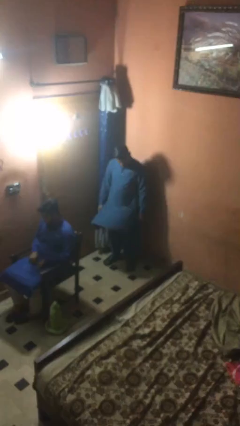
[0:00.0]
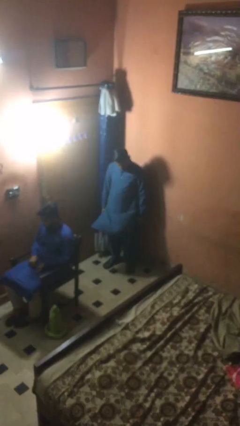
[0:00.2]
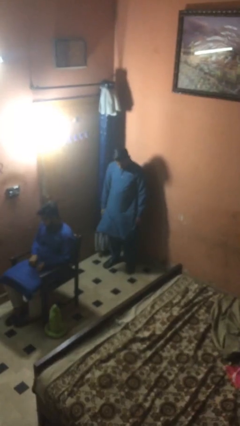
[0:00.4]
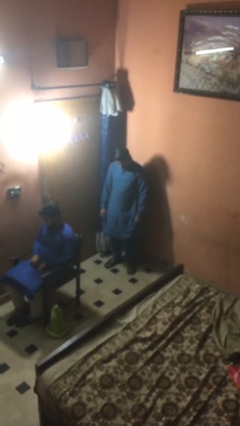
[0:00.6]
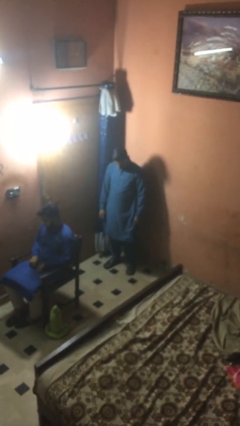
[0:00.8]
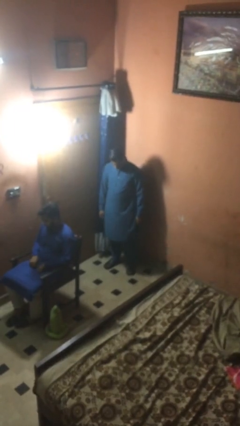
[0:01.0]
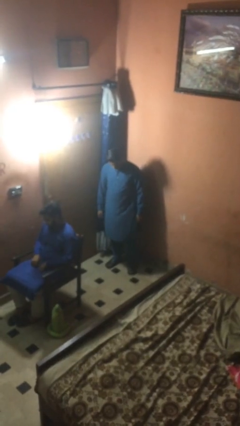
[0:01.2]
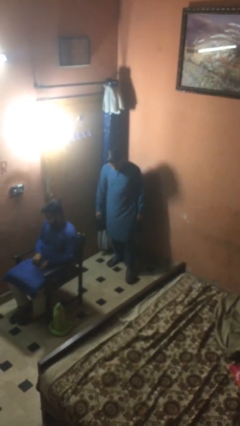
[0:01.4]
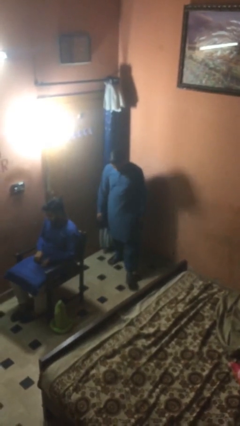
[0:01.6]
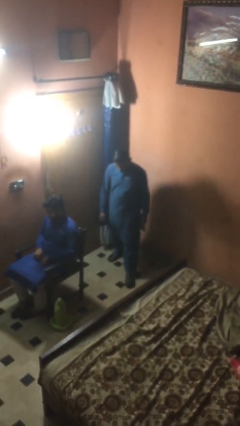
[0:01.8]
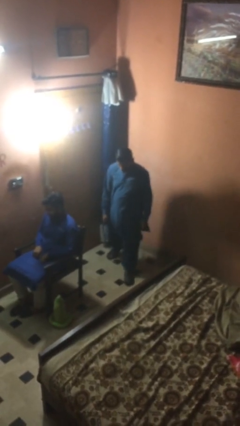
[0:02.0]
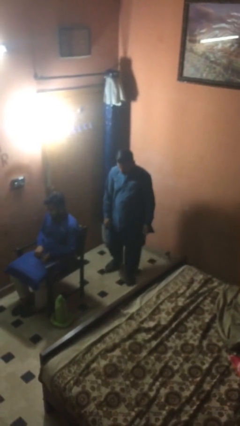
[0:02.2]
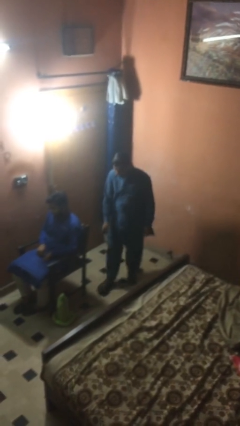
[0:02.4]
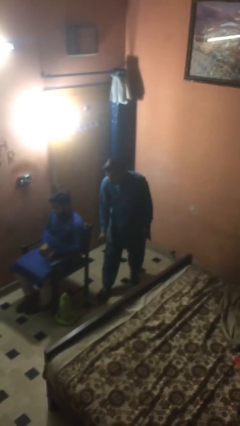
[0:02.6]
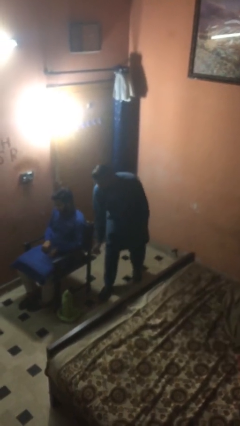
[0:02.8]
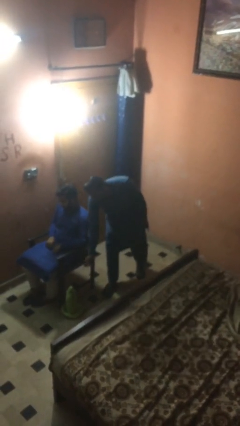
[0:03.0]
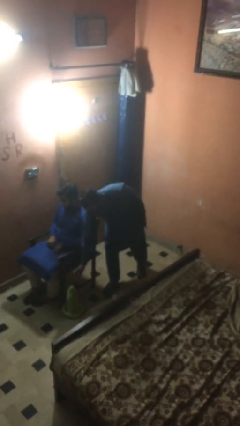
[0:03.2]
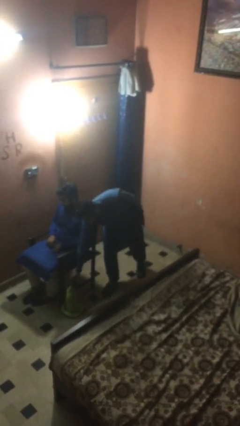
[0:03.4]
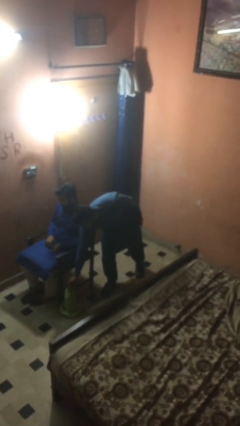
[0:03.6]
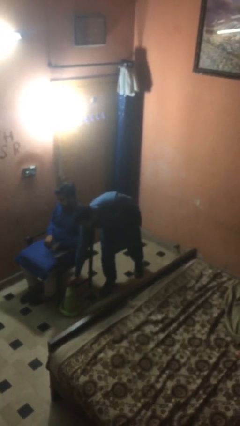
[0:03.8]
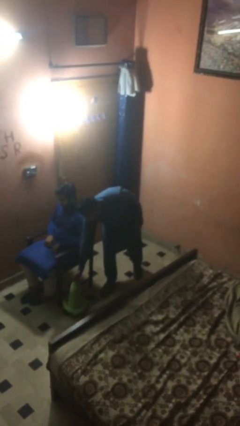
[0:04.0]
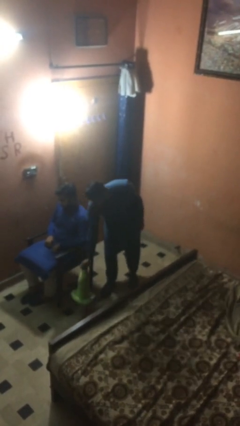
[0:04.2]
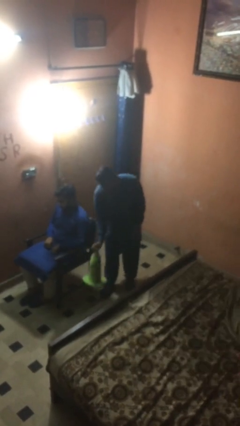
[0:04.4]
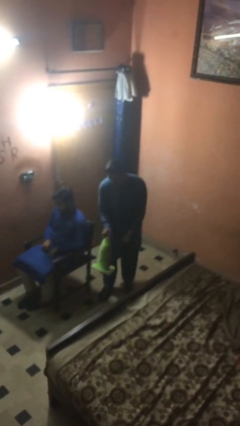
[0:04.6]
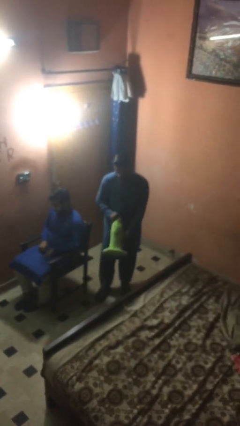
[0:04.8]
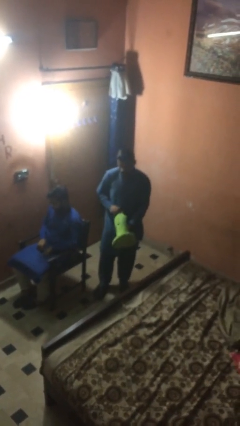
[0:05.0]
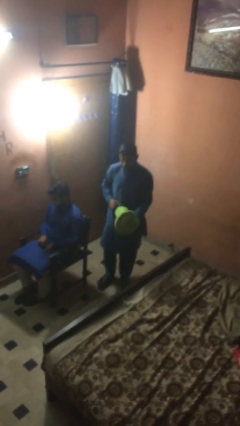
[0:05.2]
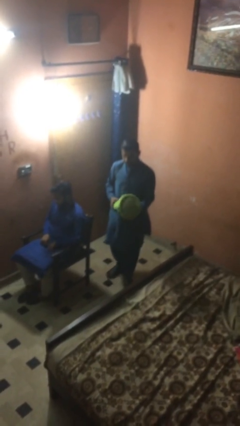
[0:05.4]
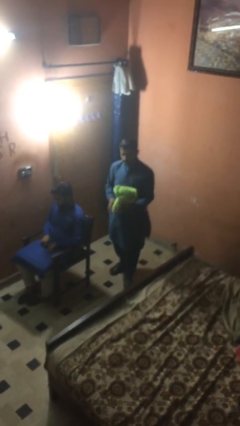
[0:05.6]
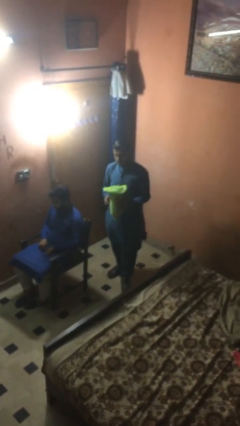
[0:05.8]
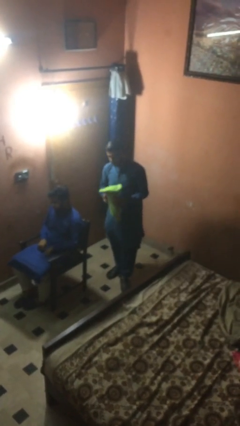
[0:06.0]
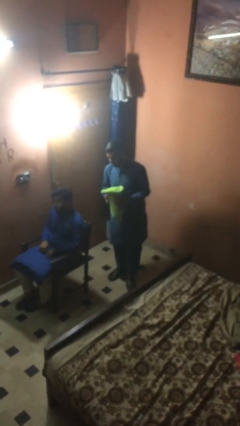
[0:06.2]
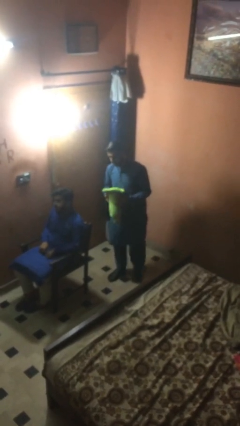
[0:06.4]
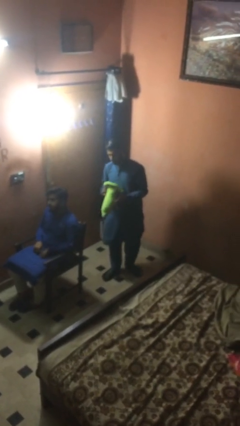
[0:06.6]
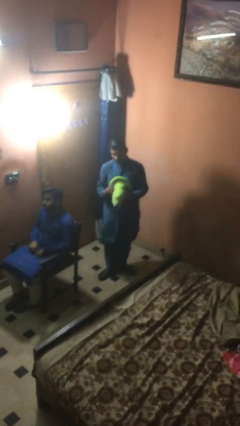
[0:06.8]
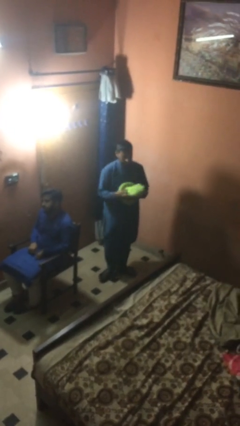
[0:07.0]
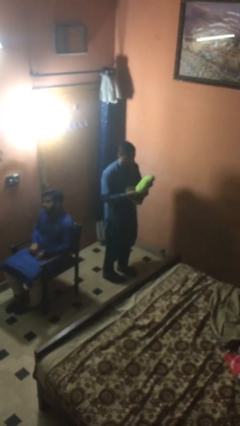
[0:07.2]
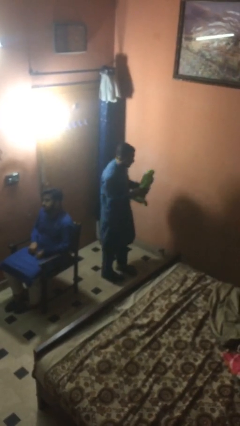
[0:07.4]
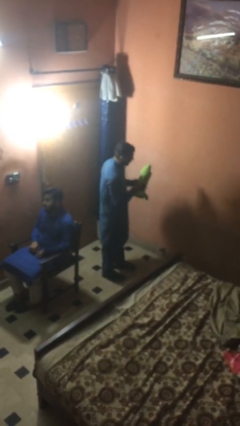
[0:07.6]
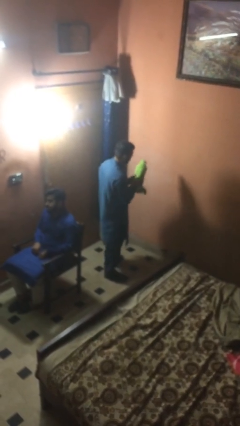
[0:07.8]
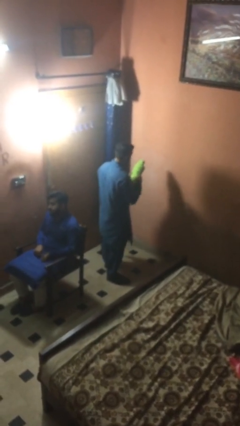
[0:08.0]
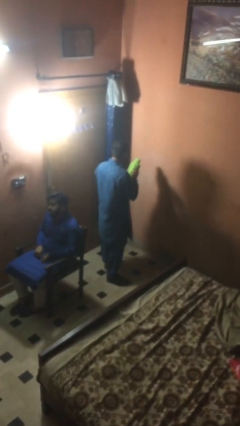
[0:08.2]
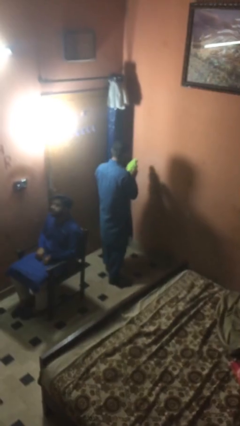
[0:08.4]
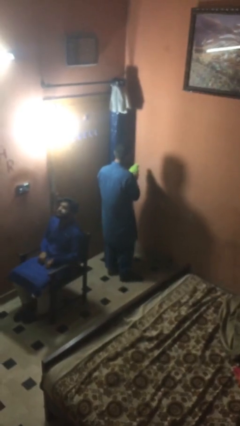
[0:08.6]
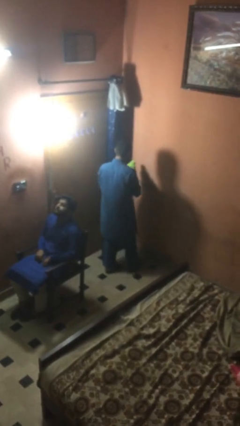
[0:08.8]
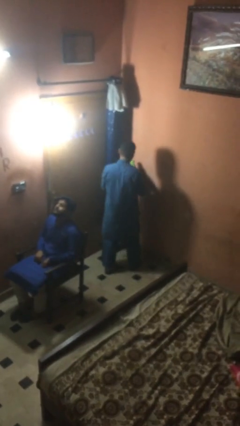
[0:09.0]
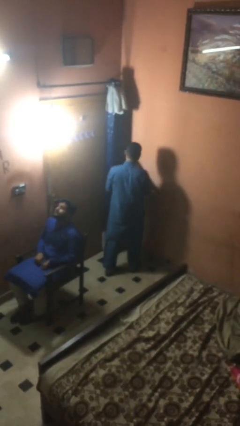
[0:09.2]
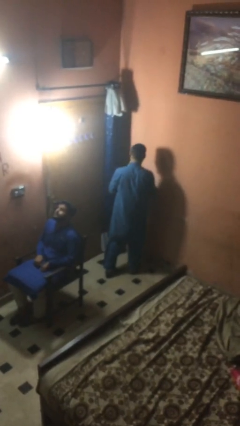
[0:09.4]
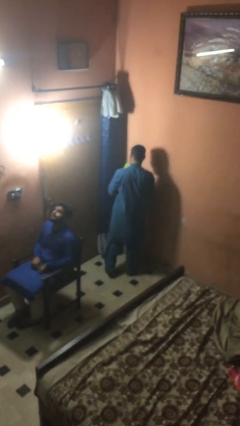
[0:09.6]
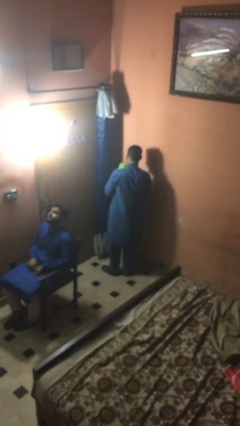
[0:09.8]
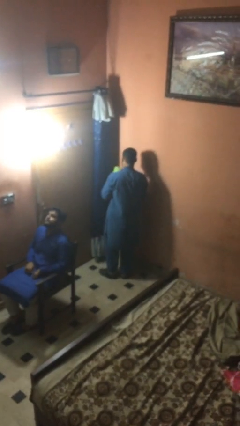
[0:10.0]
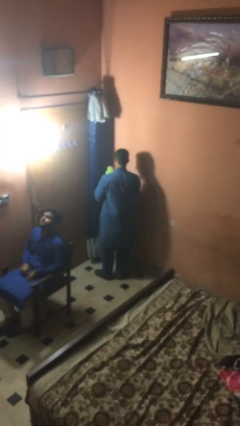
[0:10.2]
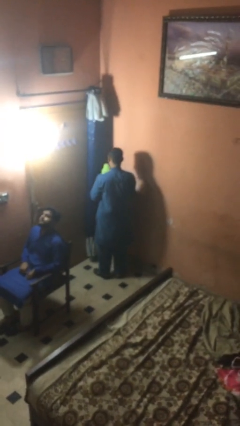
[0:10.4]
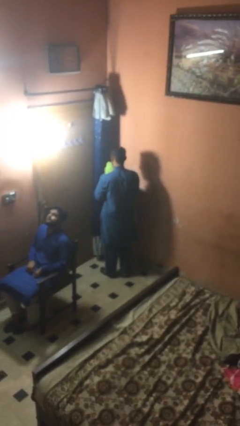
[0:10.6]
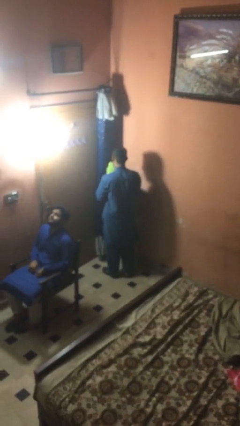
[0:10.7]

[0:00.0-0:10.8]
person steals object from person

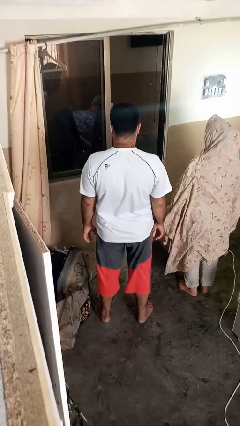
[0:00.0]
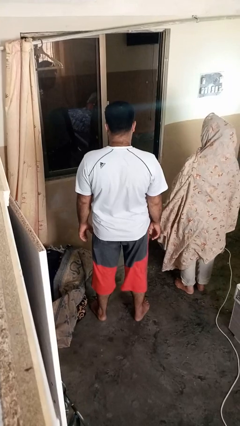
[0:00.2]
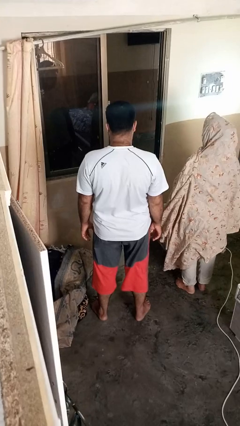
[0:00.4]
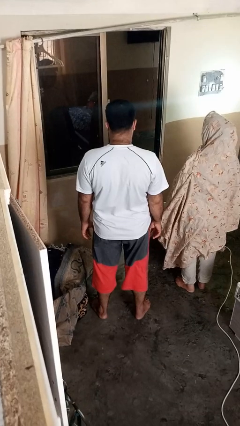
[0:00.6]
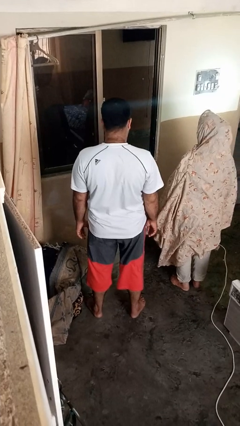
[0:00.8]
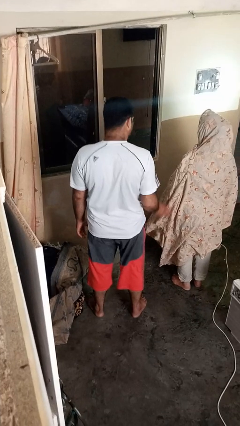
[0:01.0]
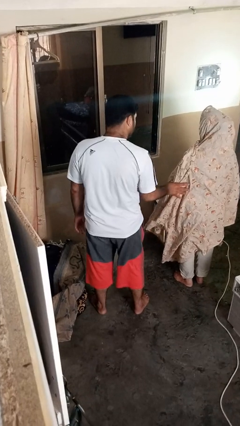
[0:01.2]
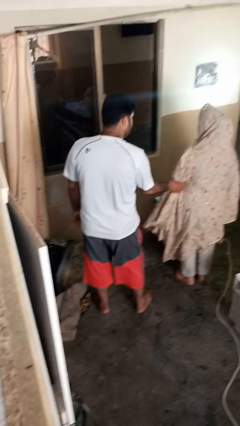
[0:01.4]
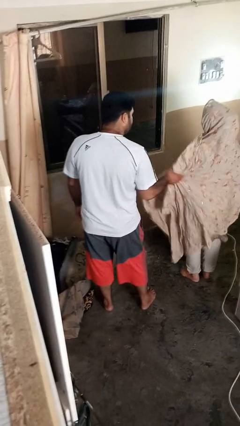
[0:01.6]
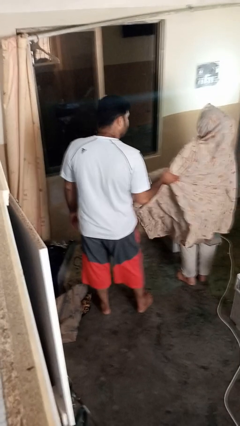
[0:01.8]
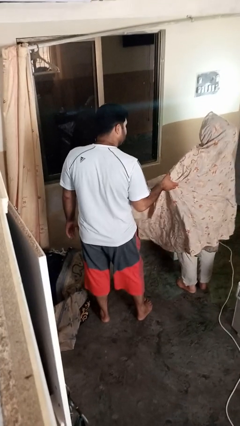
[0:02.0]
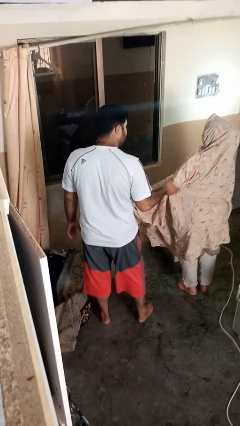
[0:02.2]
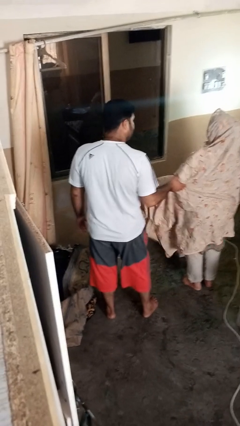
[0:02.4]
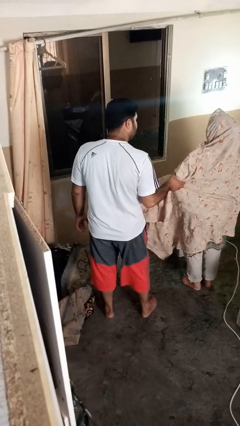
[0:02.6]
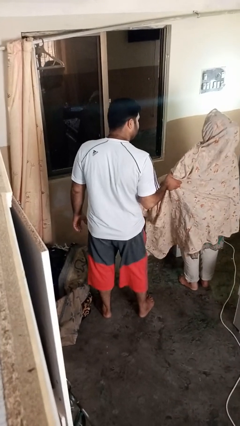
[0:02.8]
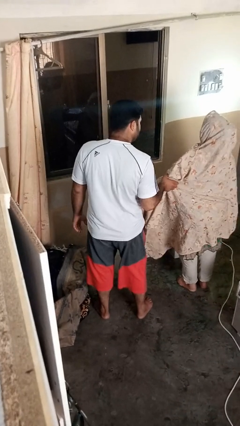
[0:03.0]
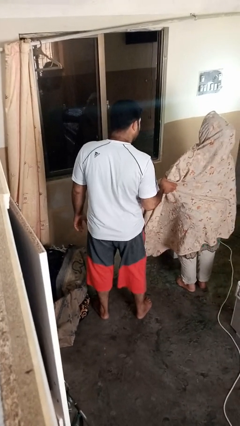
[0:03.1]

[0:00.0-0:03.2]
person grabs person by forearm

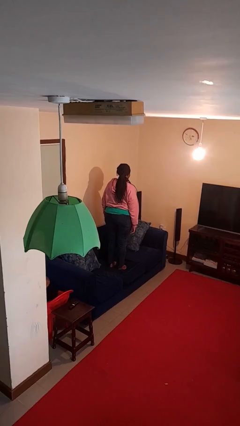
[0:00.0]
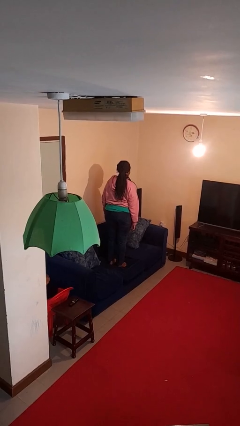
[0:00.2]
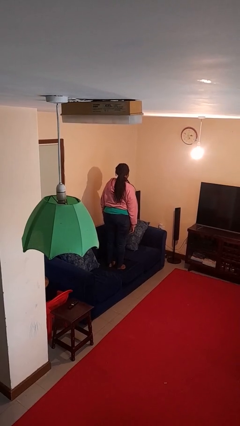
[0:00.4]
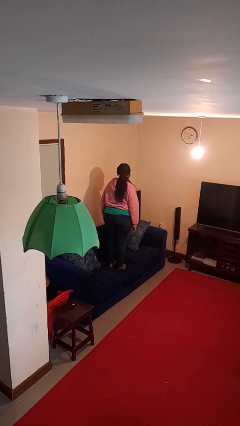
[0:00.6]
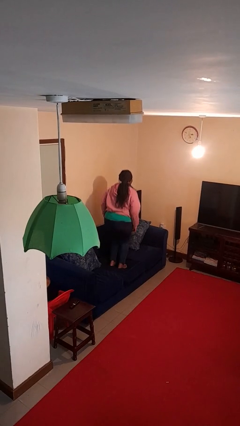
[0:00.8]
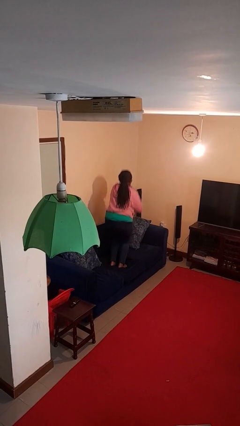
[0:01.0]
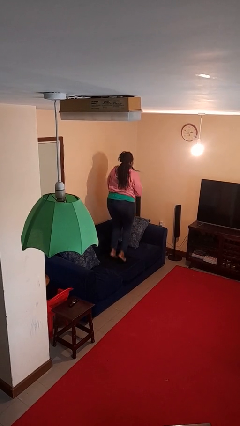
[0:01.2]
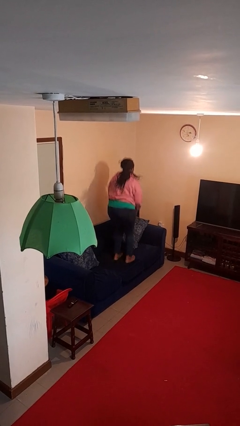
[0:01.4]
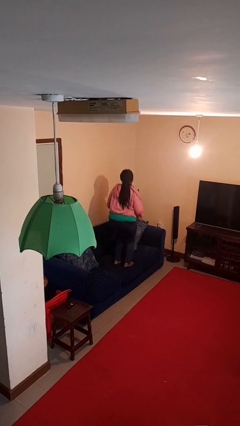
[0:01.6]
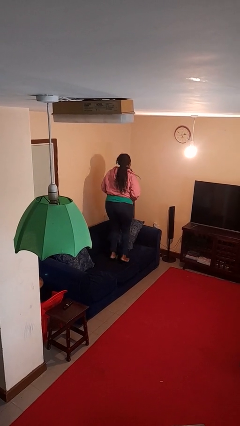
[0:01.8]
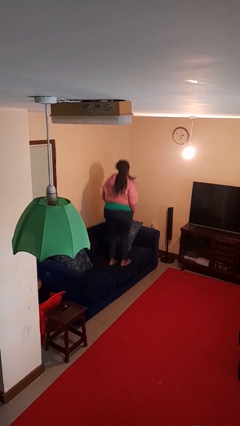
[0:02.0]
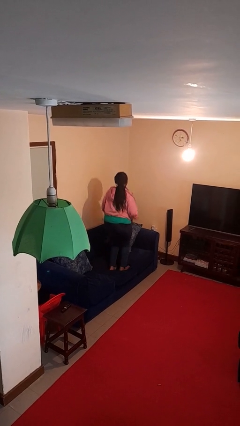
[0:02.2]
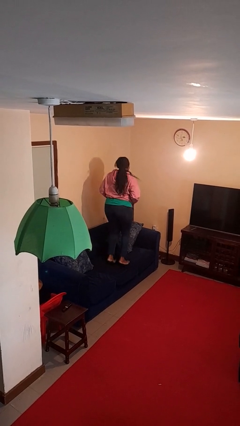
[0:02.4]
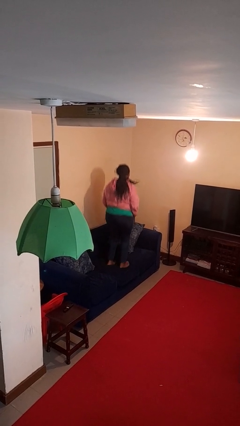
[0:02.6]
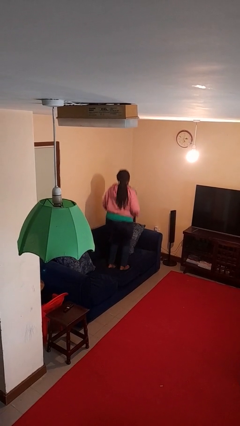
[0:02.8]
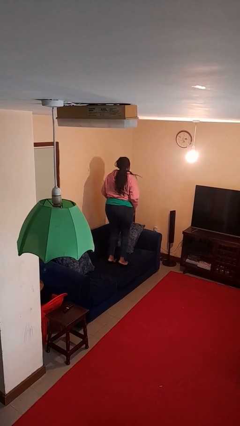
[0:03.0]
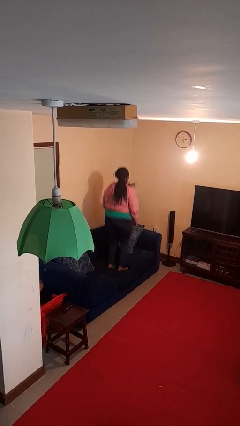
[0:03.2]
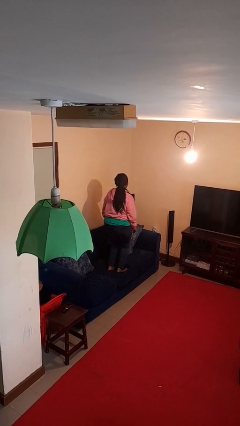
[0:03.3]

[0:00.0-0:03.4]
person jumps on couch

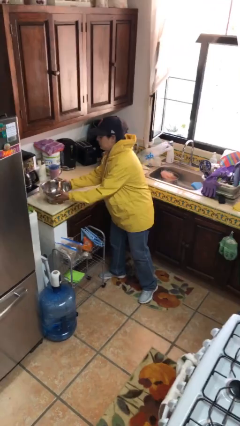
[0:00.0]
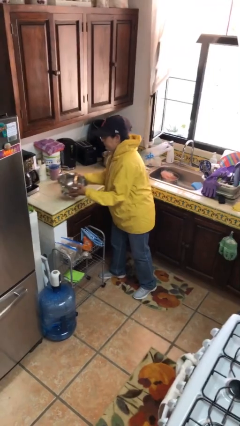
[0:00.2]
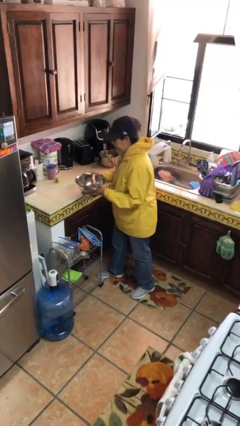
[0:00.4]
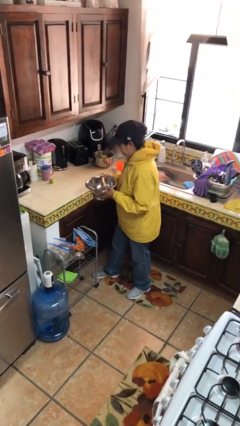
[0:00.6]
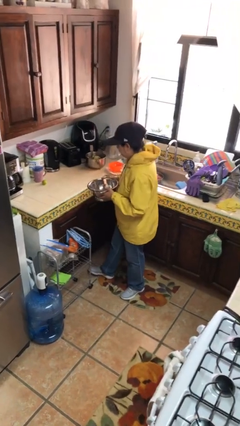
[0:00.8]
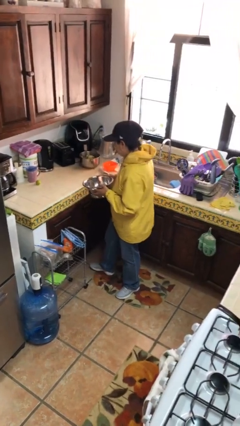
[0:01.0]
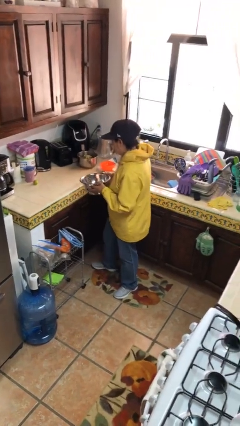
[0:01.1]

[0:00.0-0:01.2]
person picks up object from countertop
